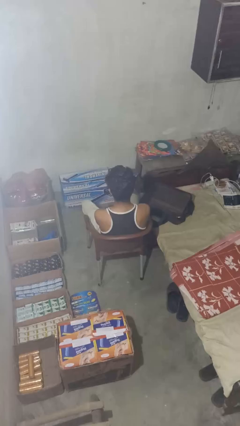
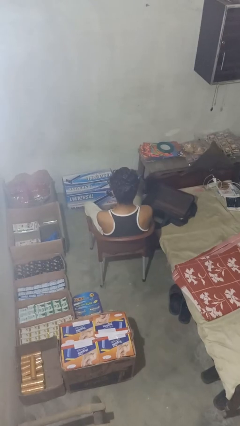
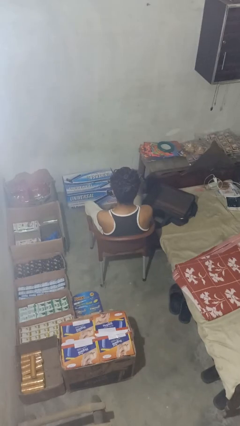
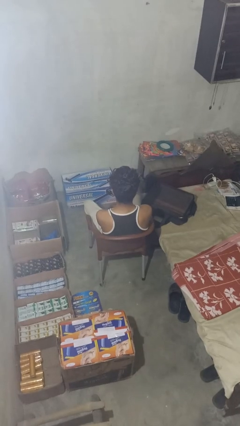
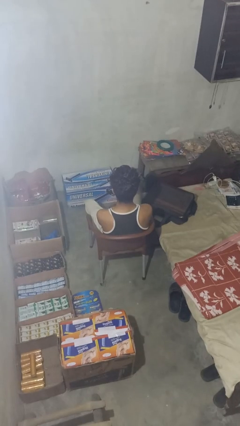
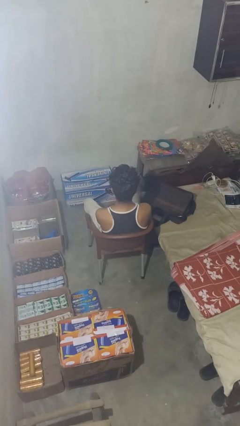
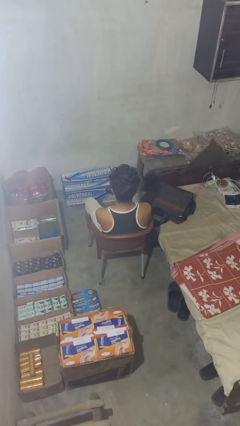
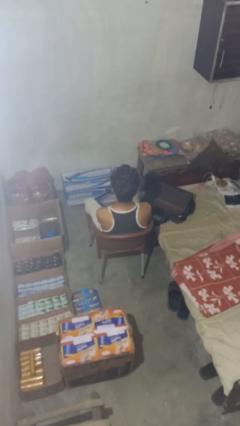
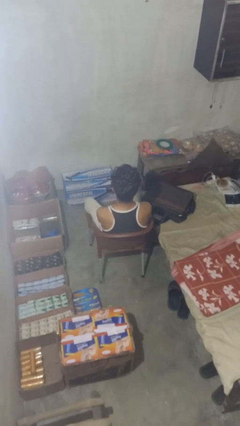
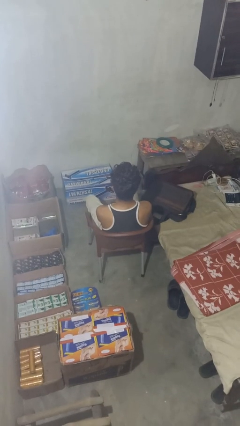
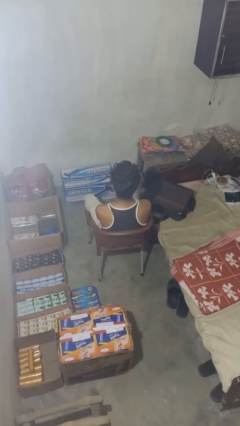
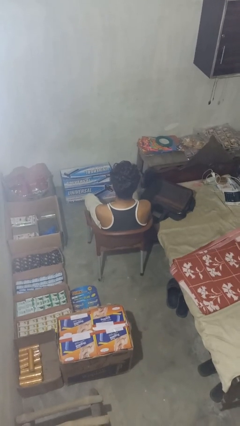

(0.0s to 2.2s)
person unloads clothes from suitcase

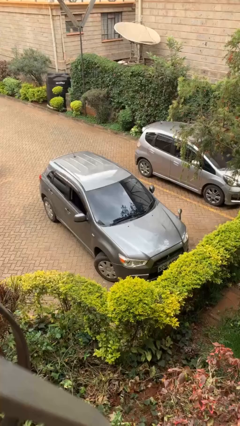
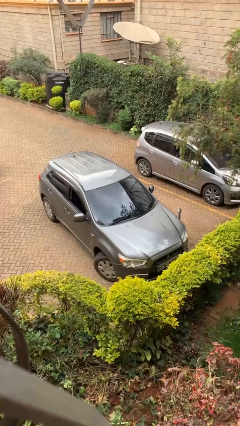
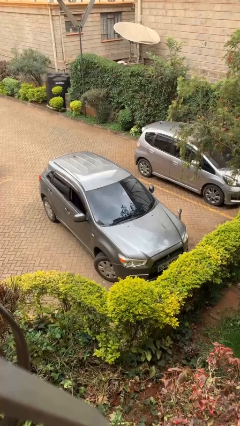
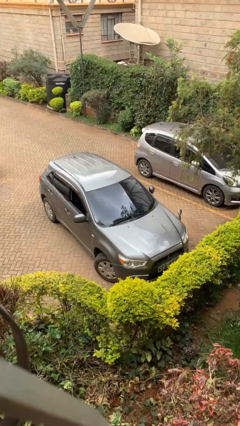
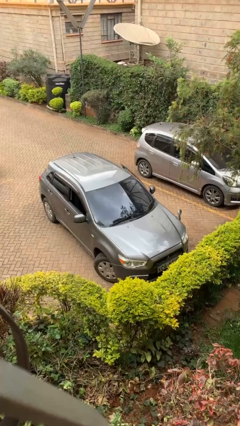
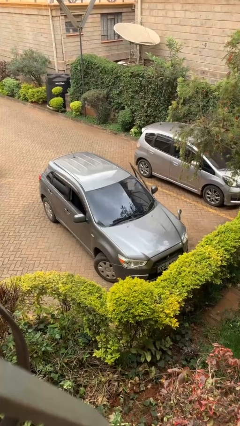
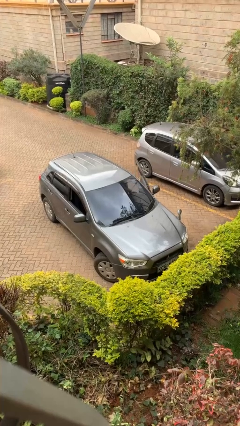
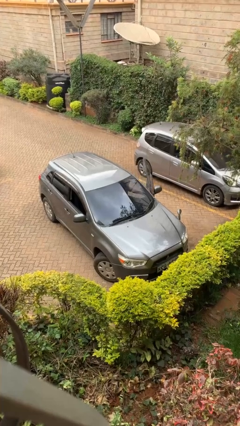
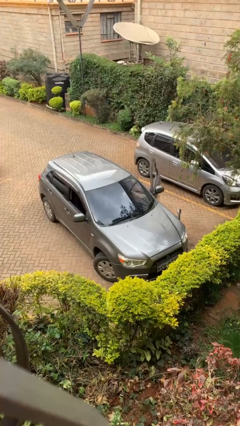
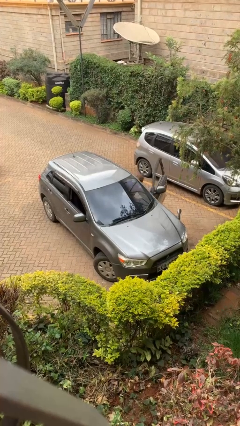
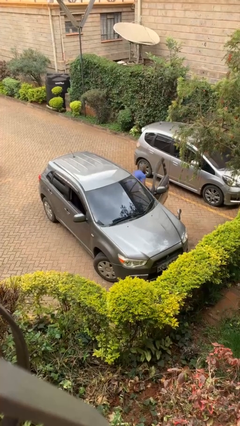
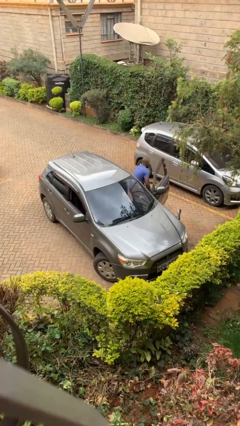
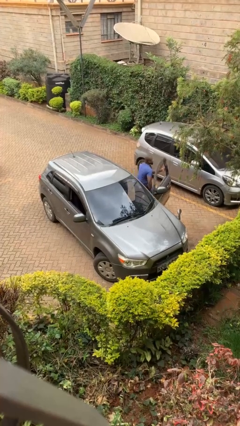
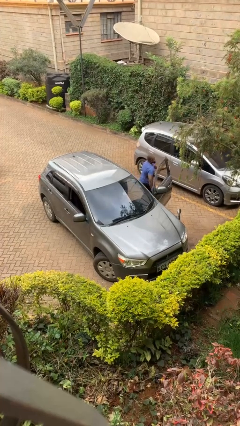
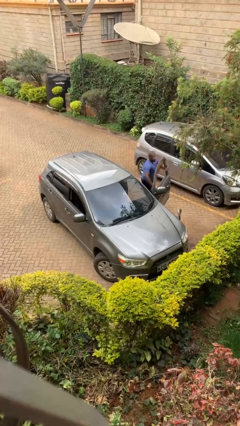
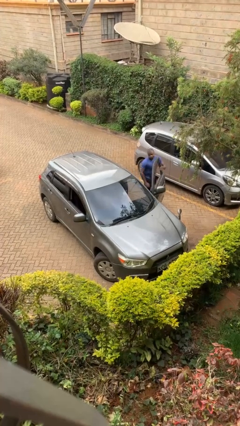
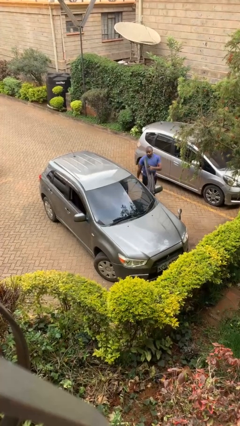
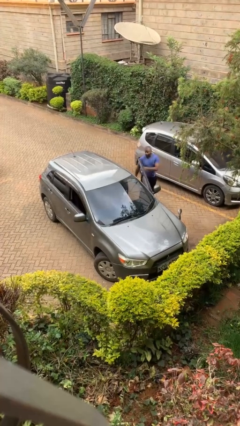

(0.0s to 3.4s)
car drops off person

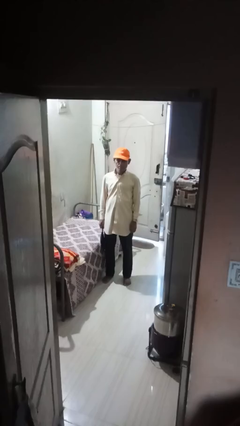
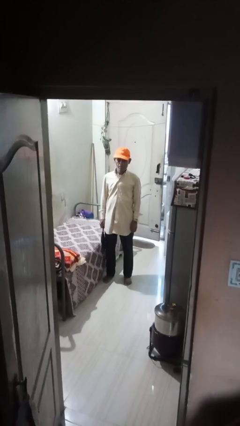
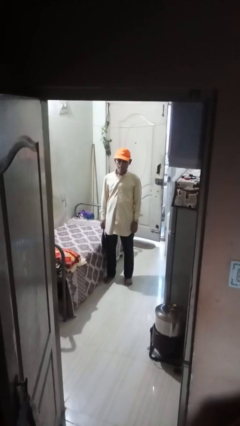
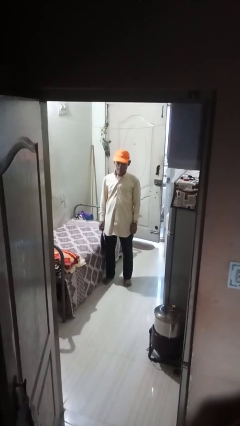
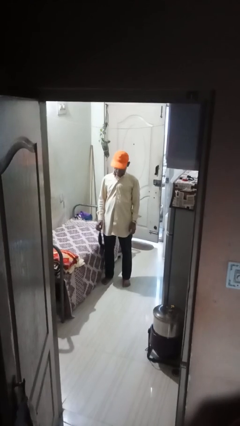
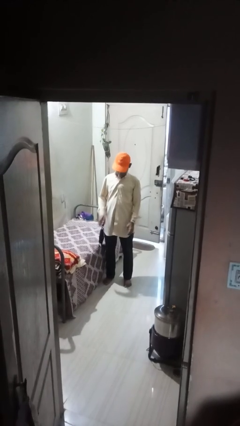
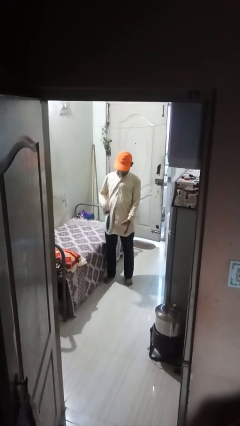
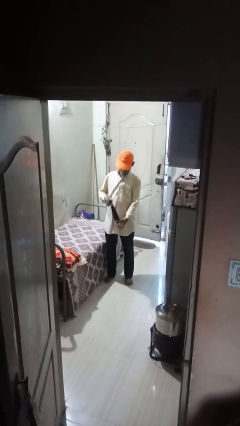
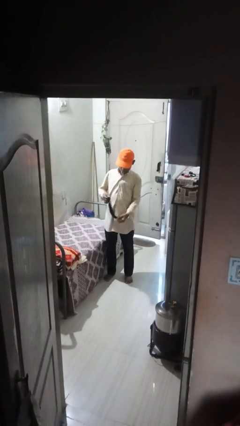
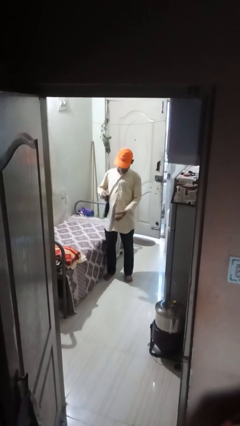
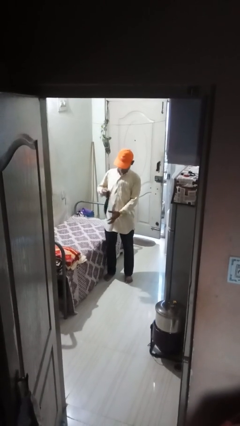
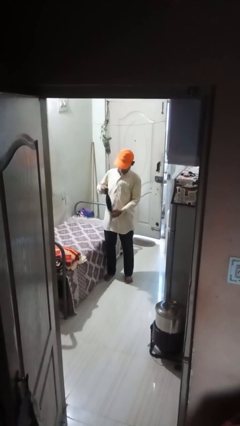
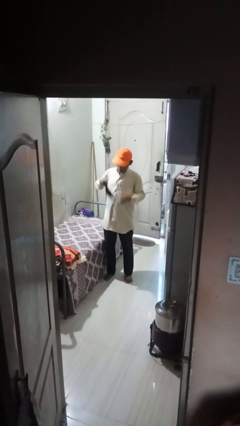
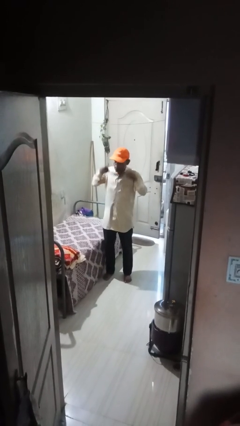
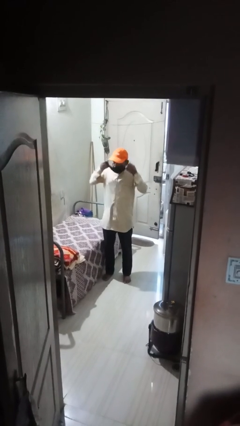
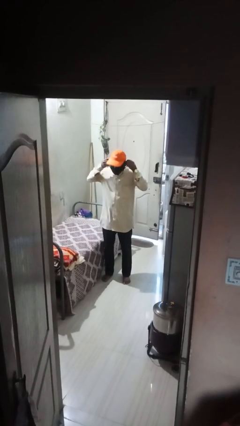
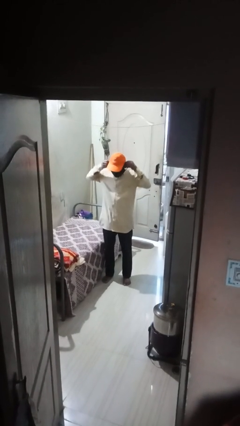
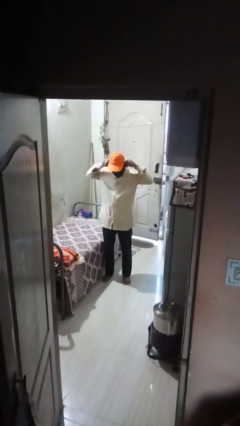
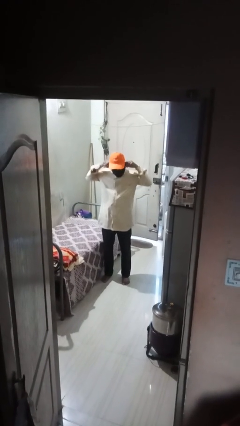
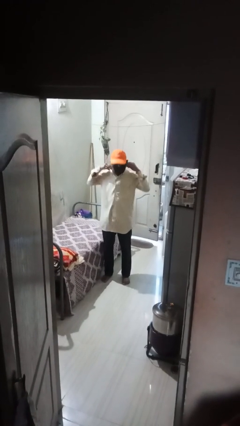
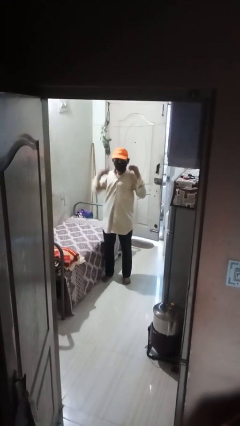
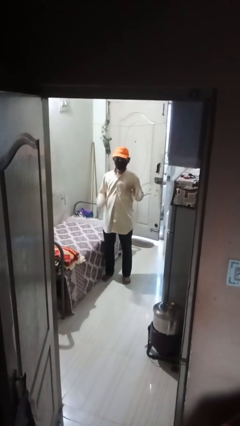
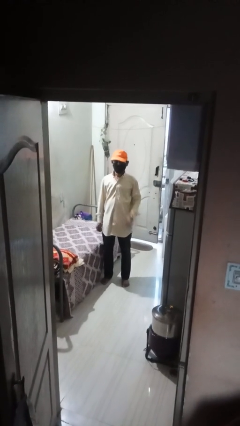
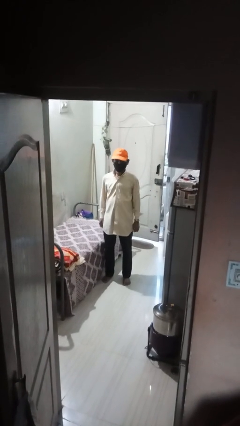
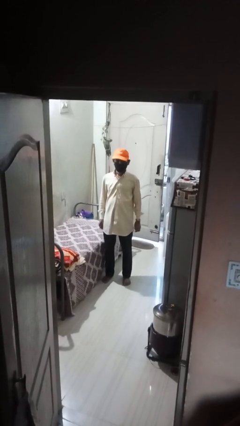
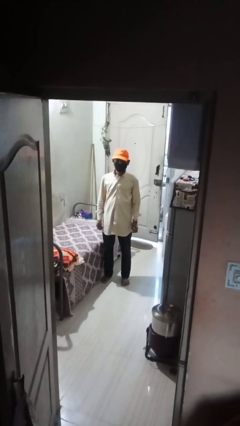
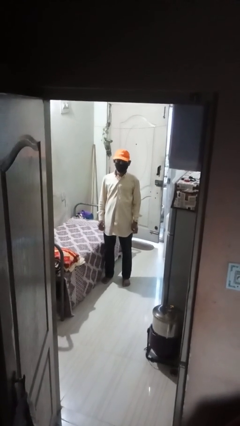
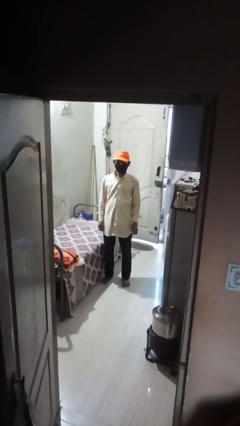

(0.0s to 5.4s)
person puts on facemask

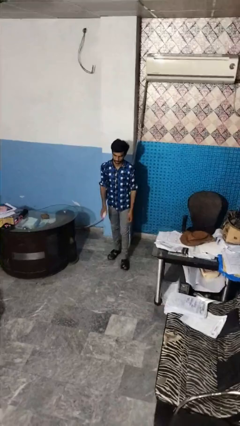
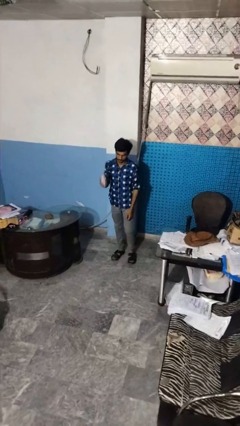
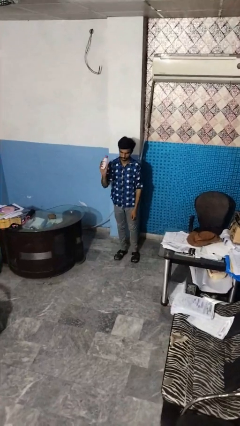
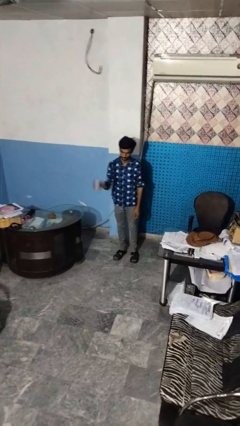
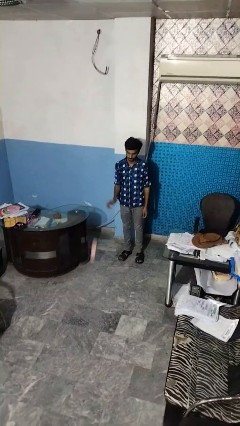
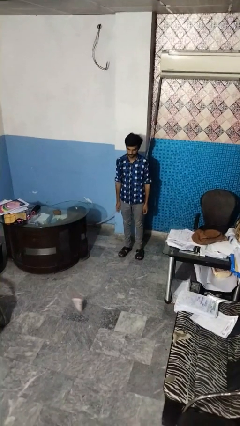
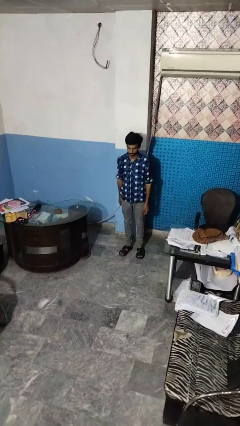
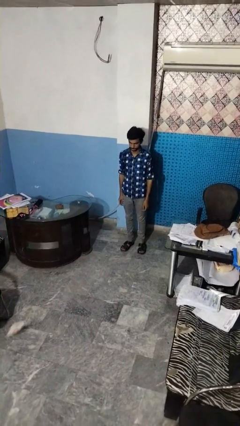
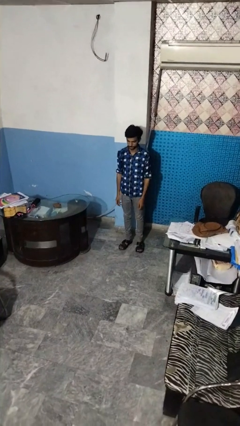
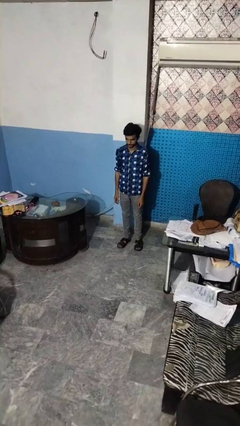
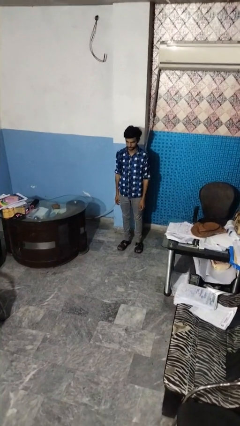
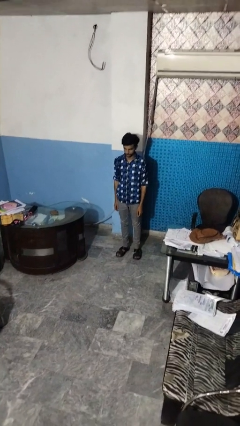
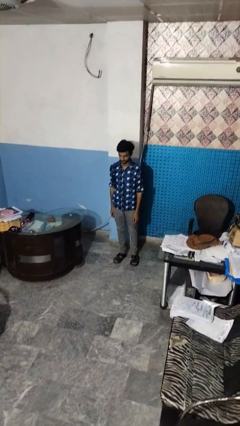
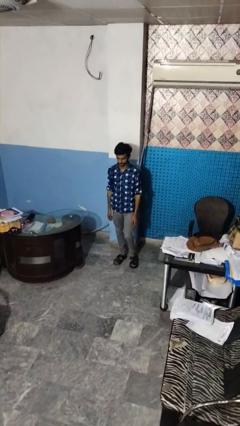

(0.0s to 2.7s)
person throws object to ground

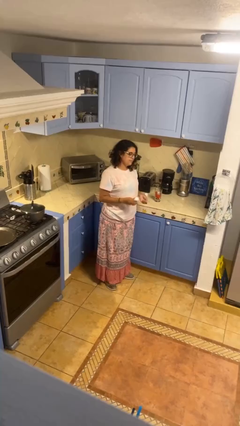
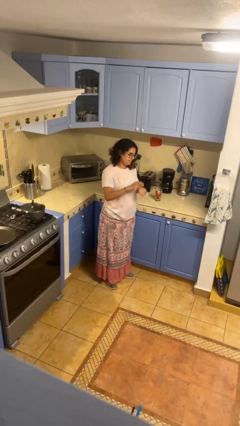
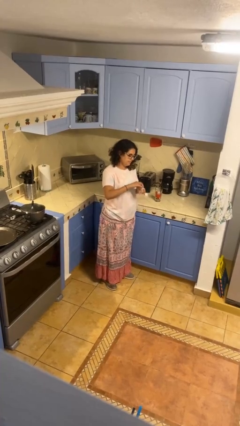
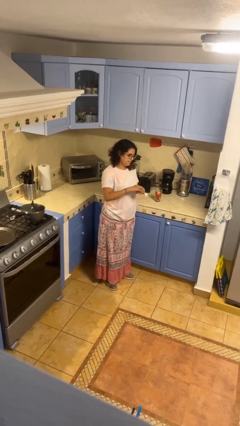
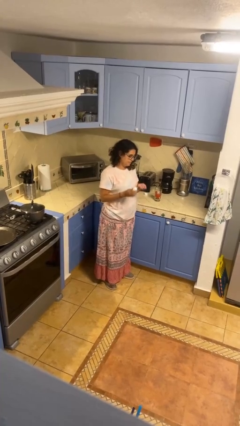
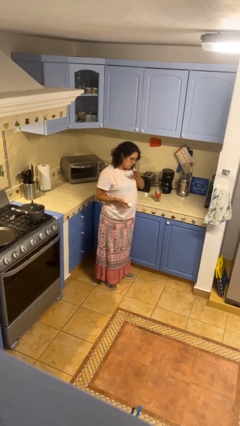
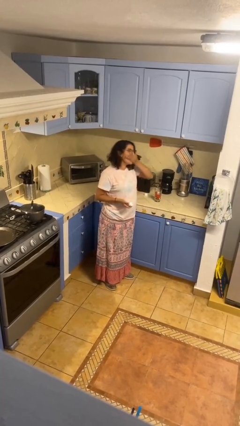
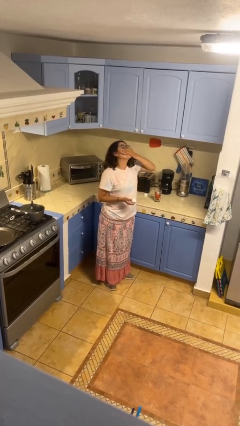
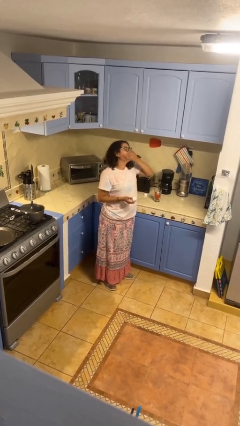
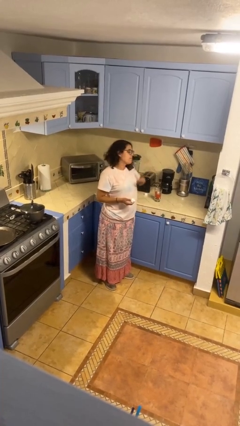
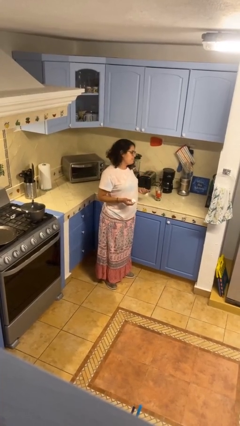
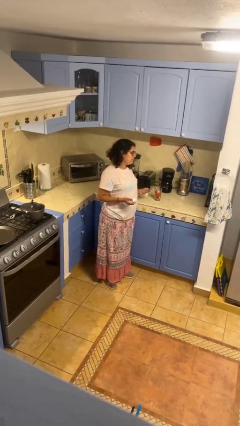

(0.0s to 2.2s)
person takes medicine pills

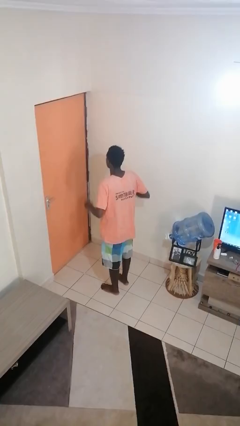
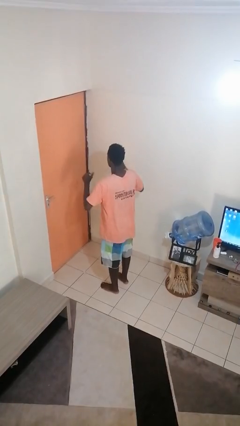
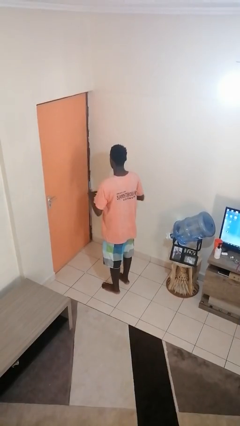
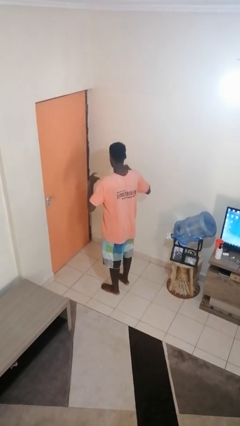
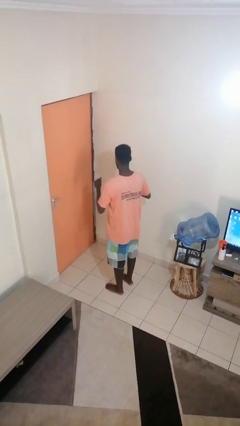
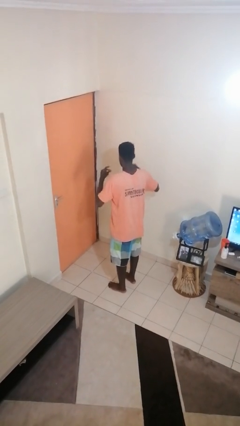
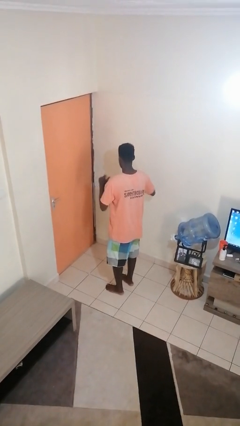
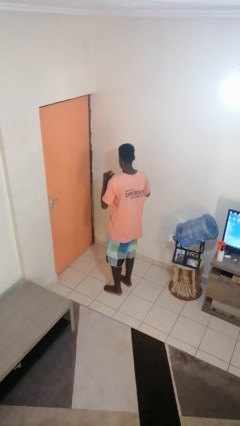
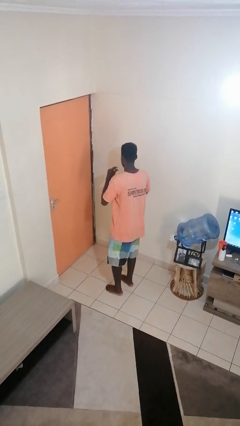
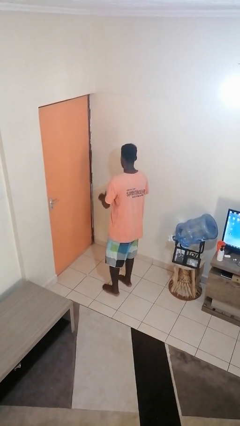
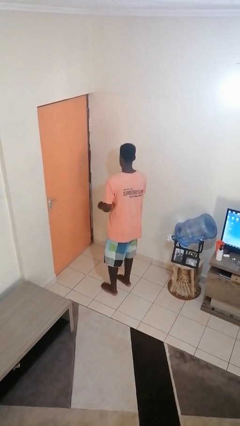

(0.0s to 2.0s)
person snaps fingers
